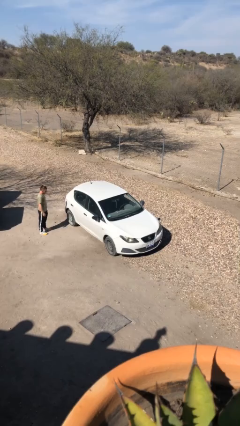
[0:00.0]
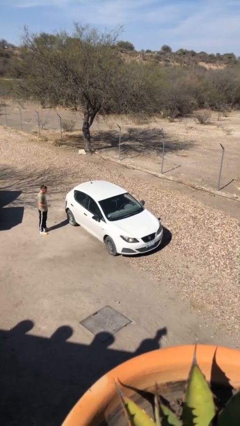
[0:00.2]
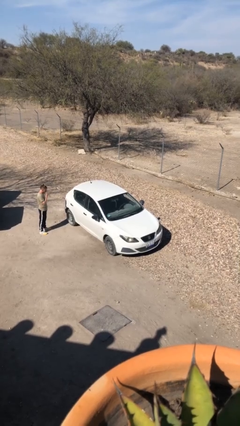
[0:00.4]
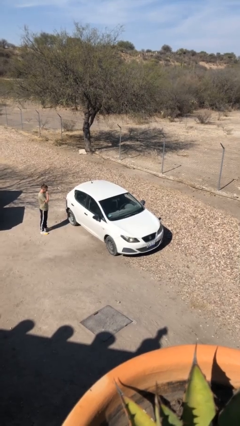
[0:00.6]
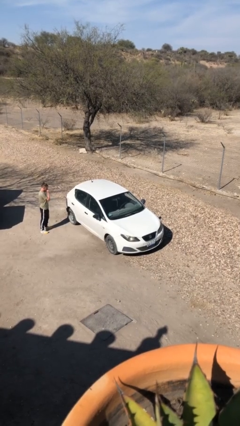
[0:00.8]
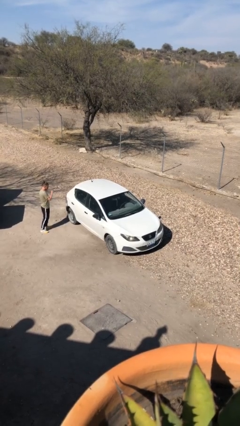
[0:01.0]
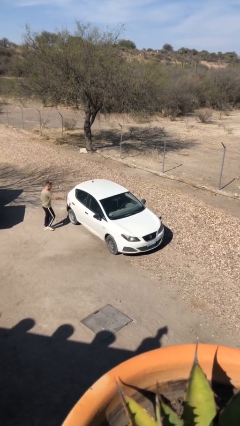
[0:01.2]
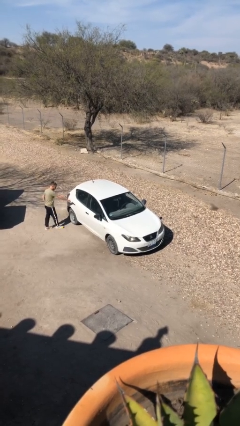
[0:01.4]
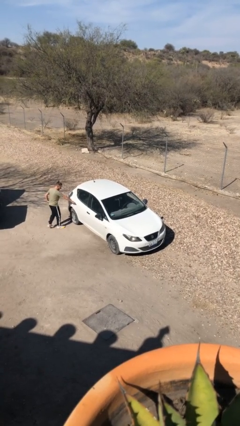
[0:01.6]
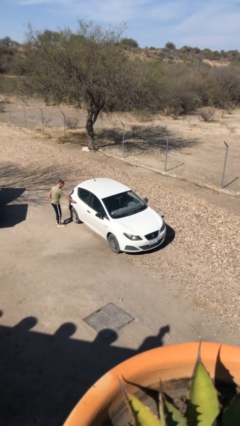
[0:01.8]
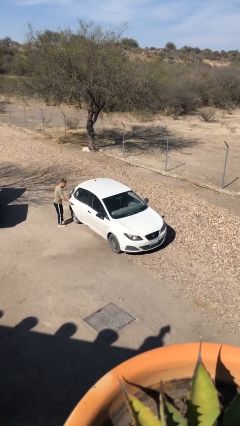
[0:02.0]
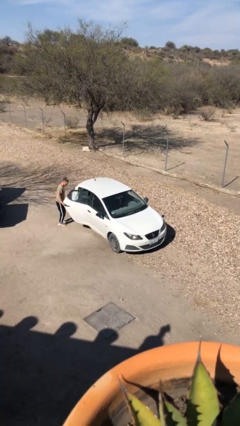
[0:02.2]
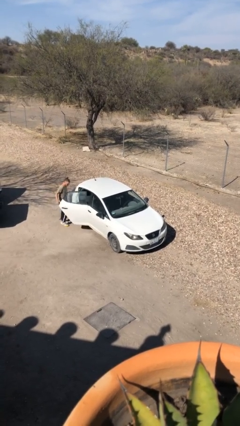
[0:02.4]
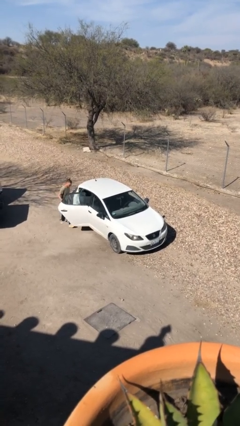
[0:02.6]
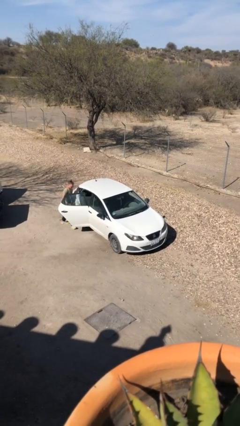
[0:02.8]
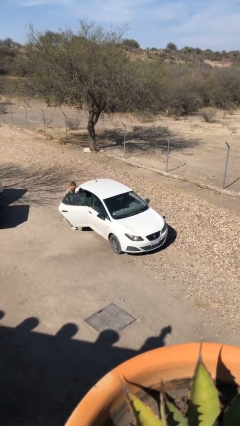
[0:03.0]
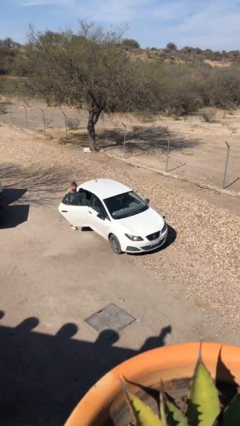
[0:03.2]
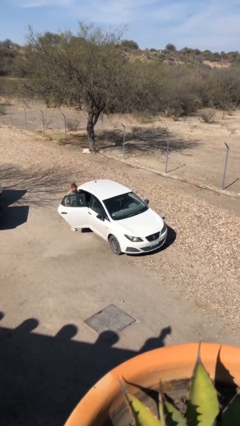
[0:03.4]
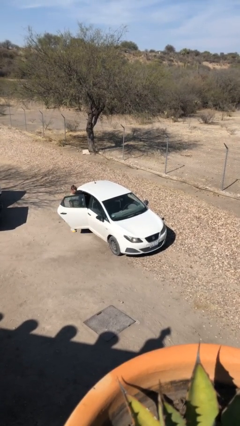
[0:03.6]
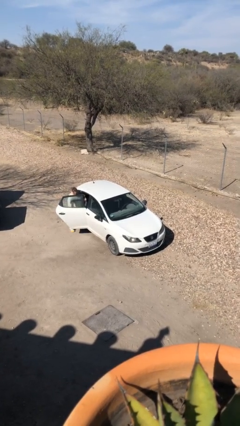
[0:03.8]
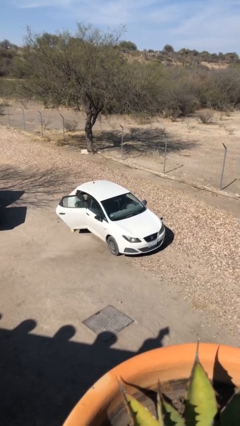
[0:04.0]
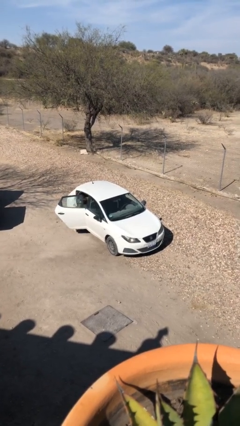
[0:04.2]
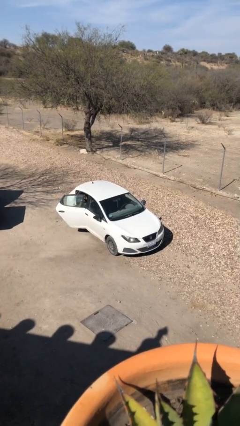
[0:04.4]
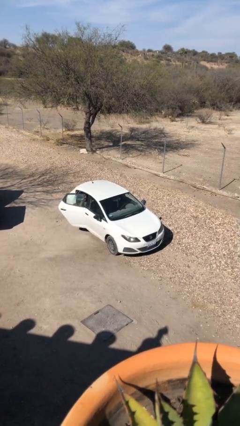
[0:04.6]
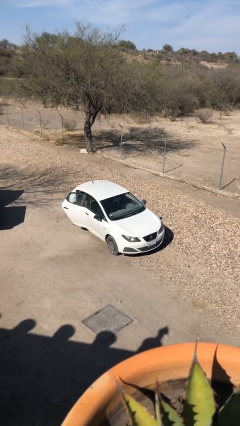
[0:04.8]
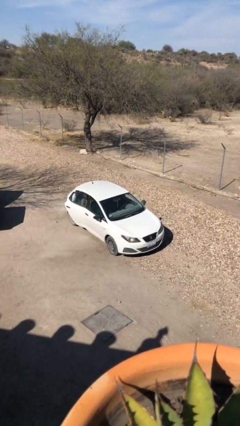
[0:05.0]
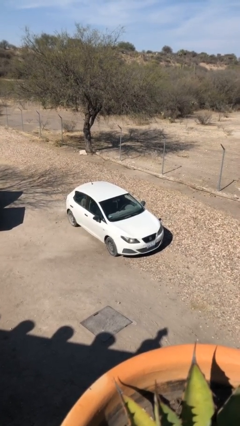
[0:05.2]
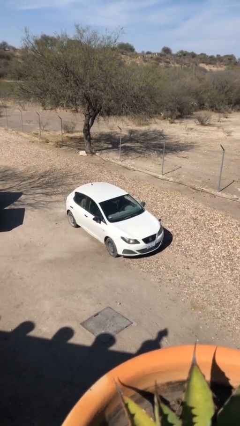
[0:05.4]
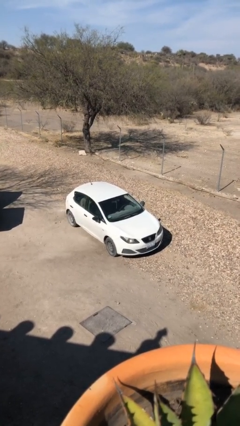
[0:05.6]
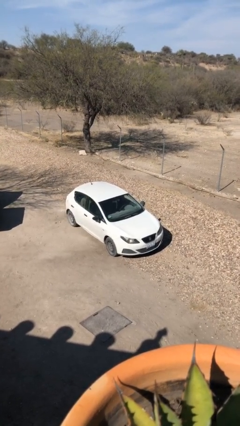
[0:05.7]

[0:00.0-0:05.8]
car picks up person

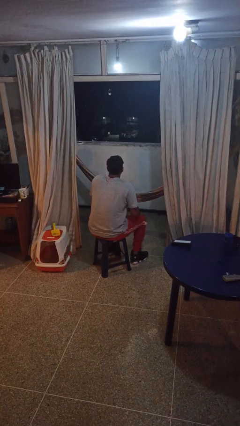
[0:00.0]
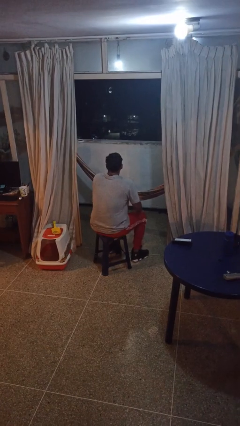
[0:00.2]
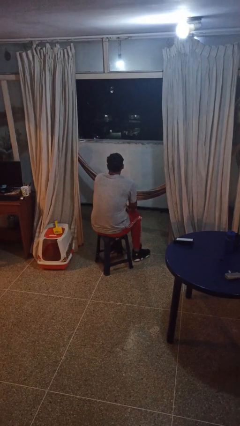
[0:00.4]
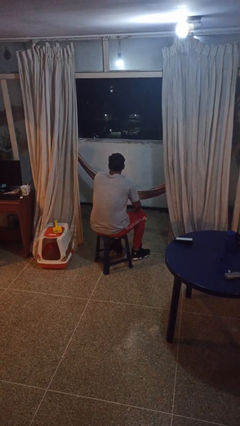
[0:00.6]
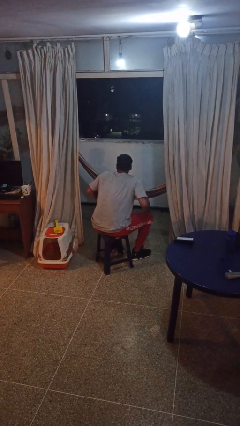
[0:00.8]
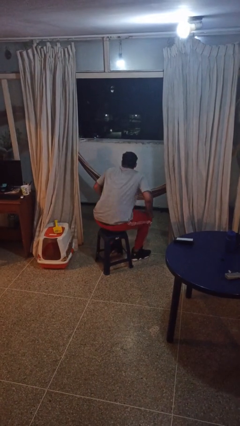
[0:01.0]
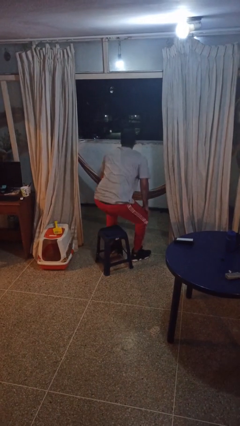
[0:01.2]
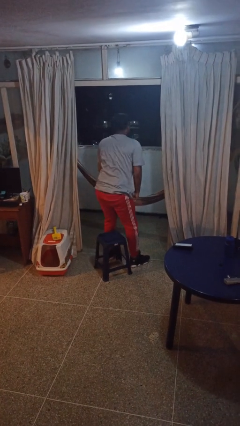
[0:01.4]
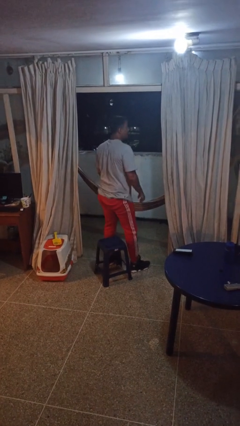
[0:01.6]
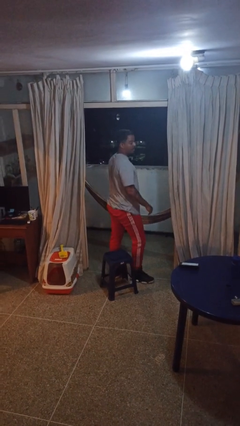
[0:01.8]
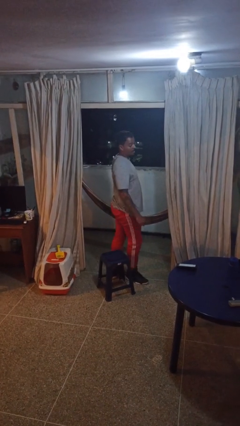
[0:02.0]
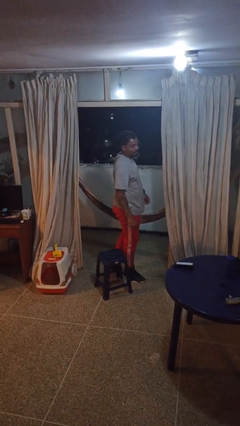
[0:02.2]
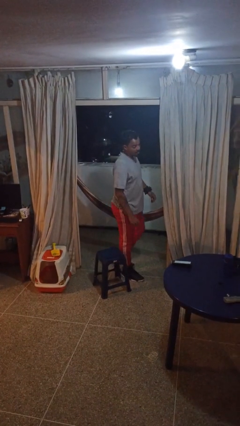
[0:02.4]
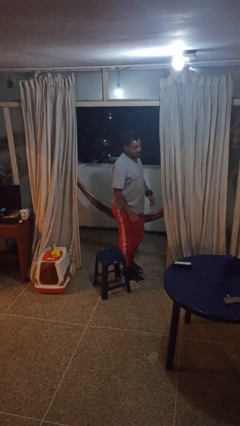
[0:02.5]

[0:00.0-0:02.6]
person stands up

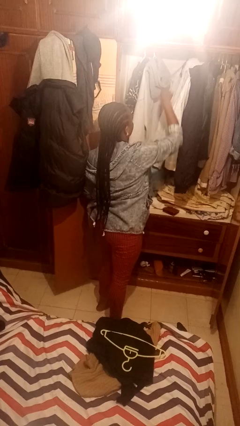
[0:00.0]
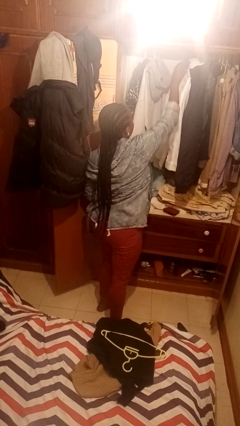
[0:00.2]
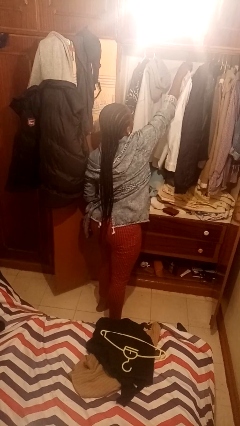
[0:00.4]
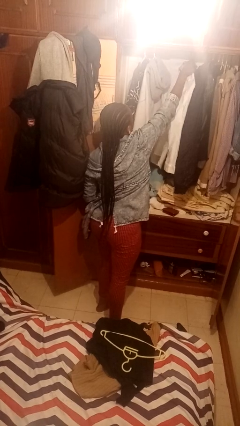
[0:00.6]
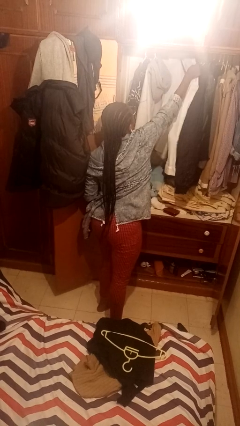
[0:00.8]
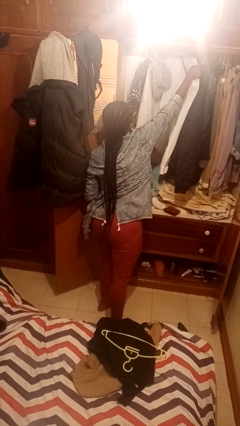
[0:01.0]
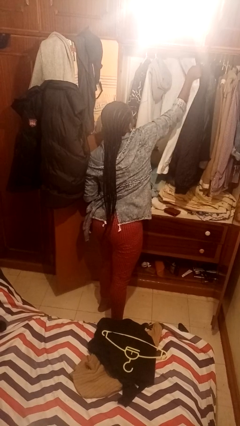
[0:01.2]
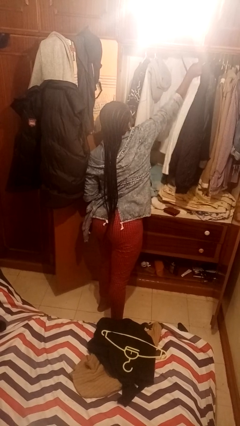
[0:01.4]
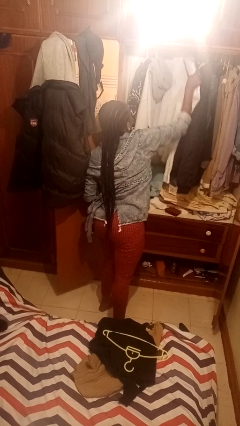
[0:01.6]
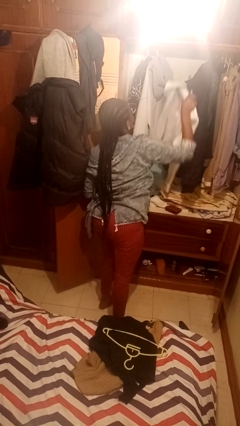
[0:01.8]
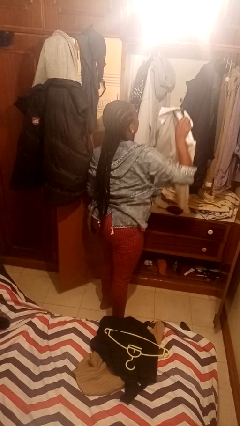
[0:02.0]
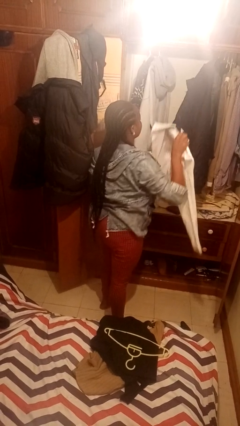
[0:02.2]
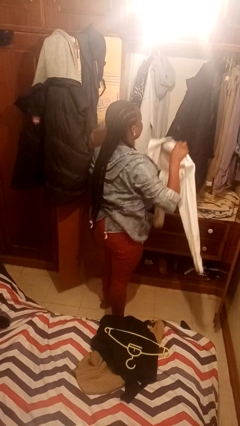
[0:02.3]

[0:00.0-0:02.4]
person takes clothes from closet

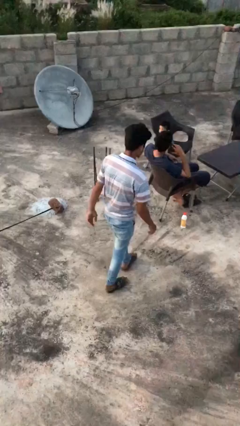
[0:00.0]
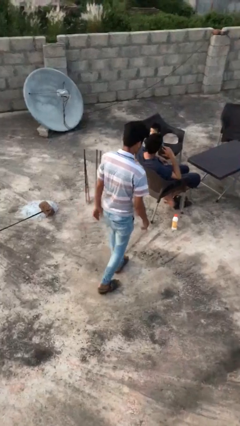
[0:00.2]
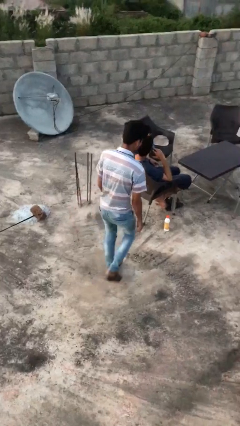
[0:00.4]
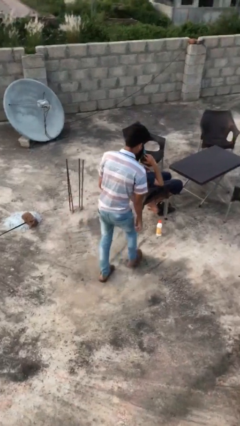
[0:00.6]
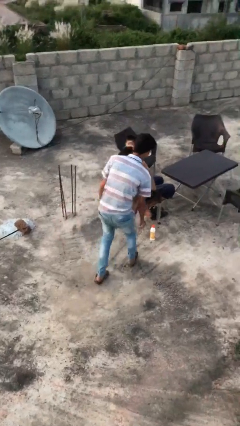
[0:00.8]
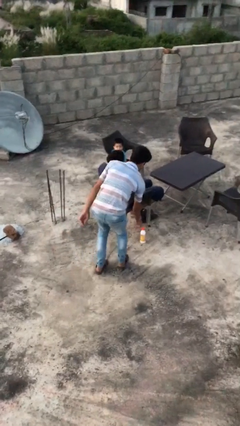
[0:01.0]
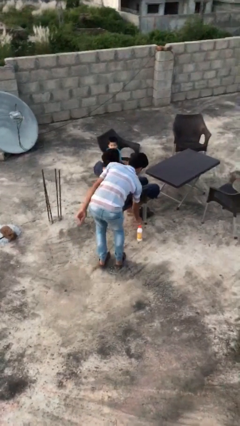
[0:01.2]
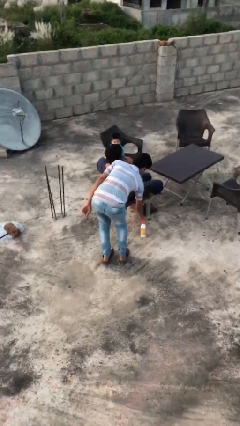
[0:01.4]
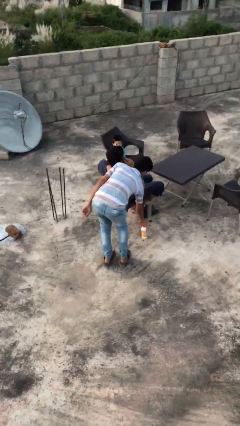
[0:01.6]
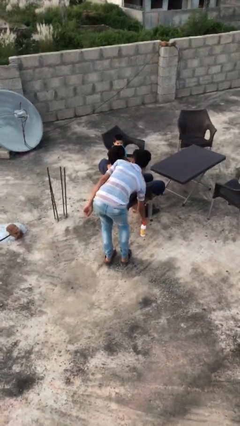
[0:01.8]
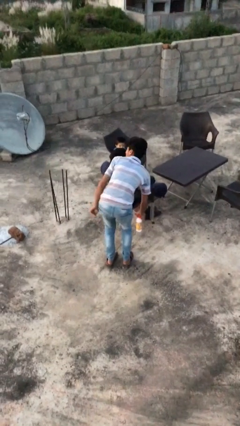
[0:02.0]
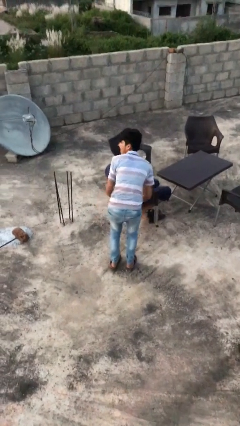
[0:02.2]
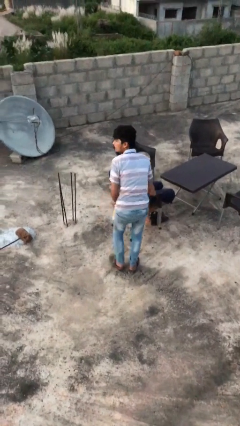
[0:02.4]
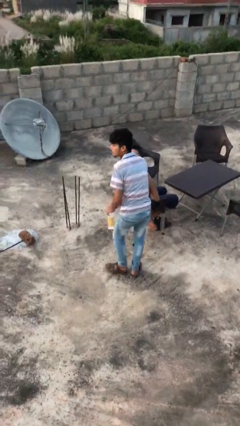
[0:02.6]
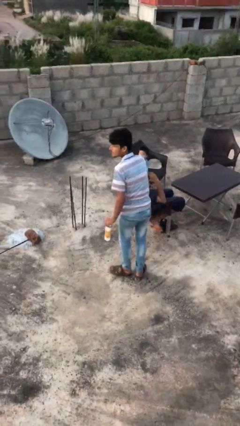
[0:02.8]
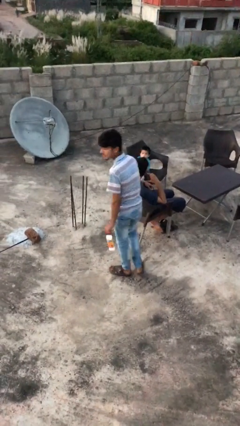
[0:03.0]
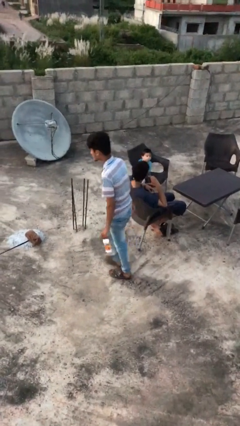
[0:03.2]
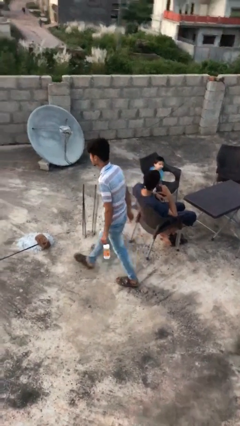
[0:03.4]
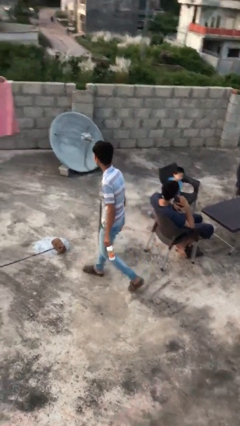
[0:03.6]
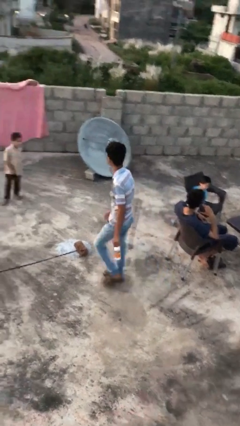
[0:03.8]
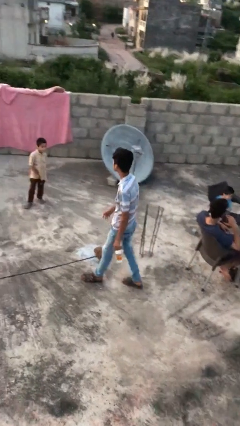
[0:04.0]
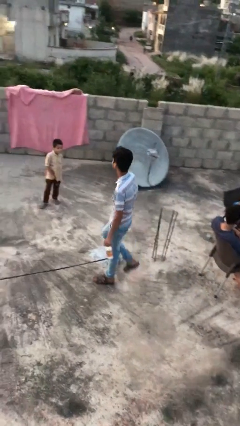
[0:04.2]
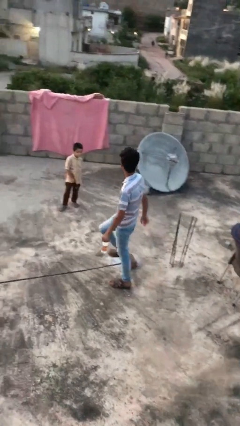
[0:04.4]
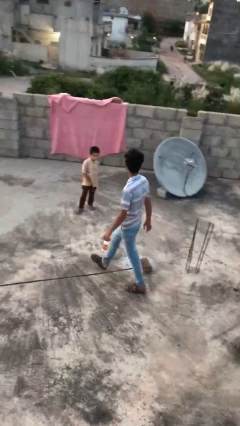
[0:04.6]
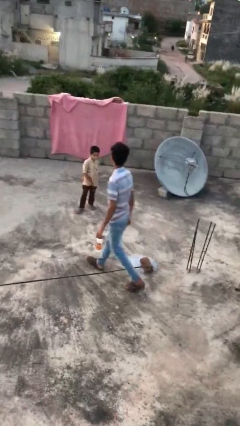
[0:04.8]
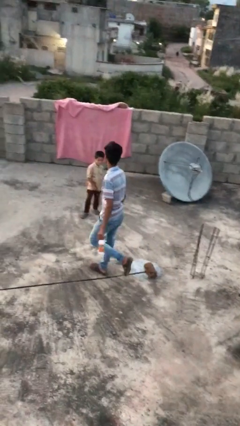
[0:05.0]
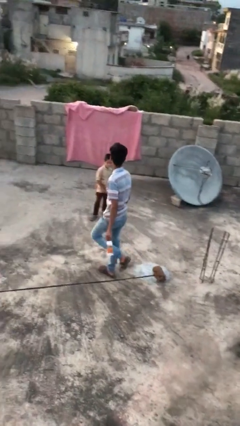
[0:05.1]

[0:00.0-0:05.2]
person steals object from person

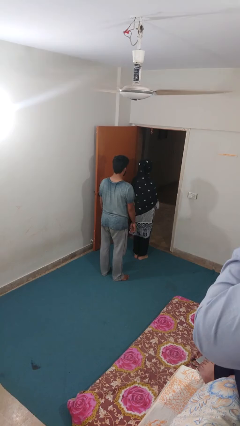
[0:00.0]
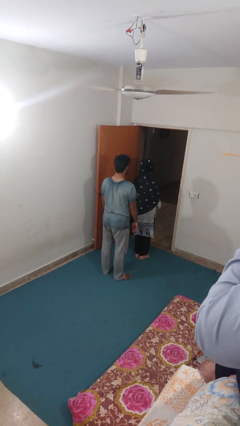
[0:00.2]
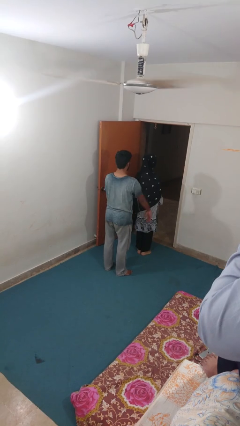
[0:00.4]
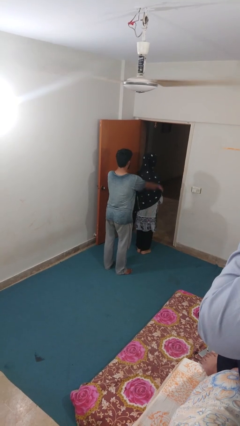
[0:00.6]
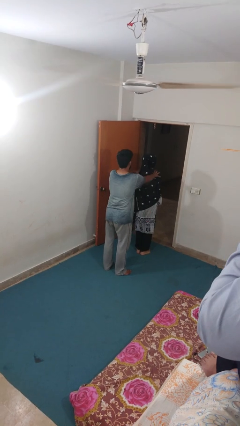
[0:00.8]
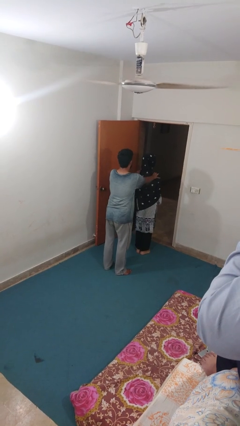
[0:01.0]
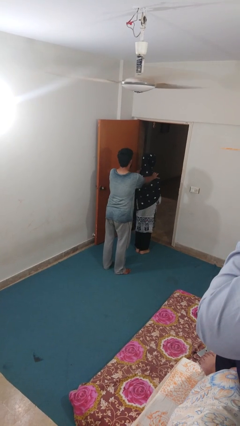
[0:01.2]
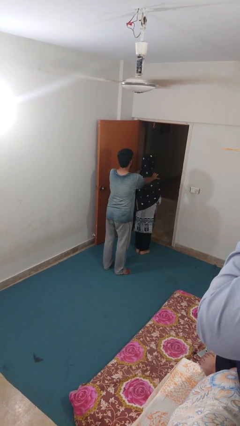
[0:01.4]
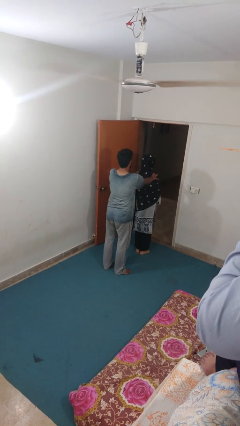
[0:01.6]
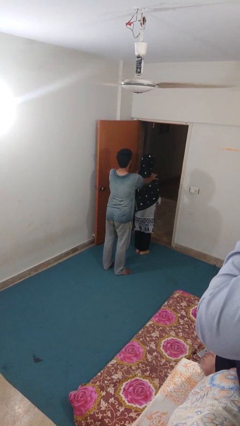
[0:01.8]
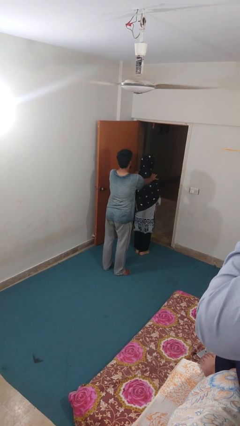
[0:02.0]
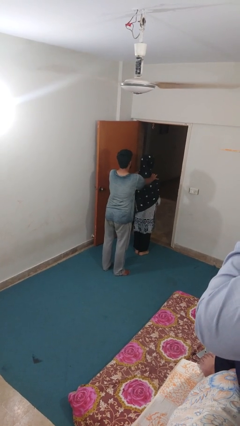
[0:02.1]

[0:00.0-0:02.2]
person grabs person by shoulder
